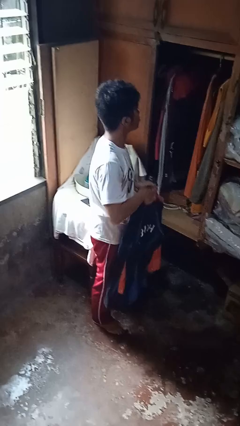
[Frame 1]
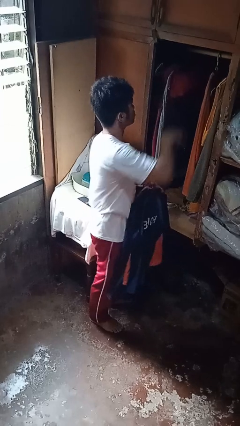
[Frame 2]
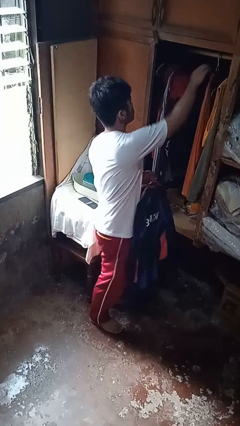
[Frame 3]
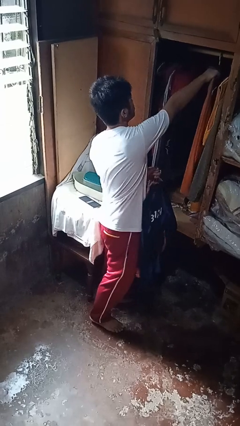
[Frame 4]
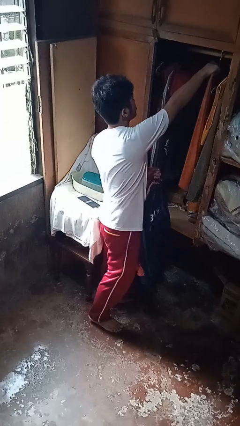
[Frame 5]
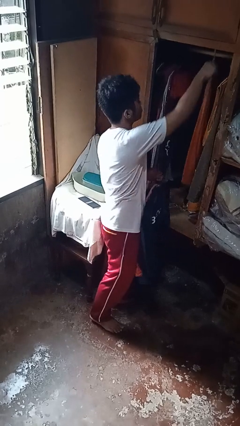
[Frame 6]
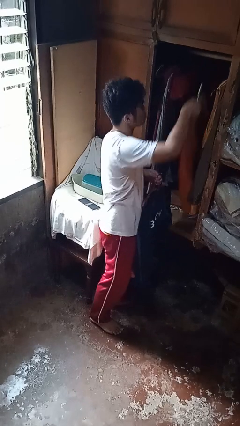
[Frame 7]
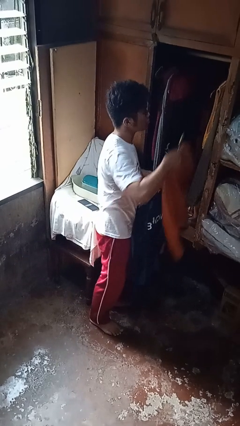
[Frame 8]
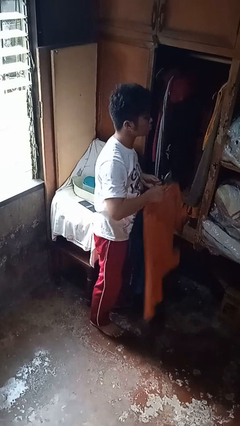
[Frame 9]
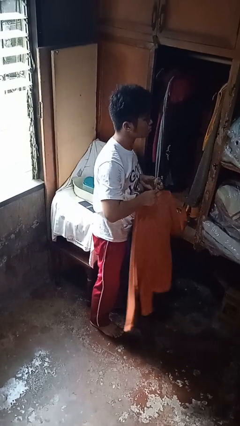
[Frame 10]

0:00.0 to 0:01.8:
person takes clothes from closet

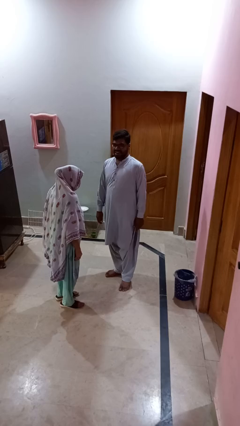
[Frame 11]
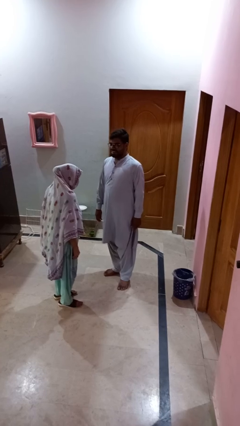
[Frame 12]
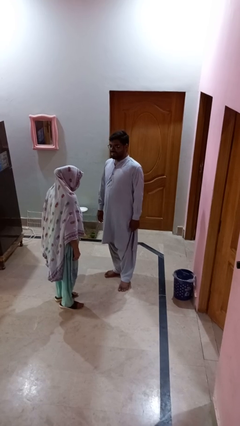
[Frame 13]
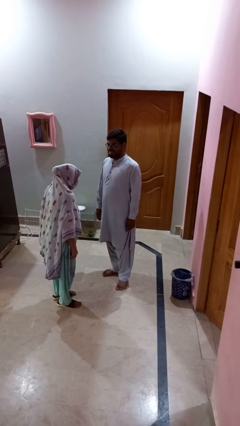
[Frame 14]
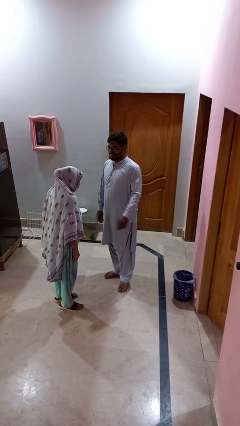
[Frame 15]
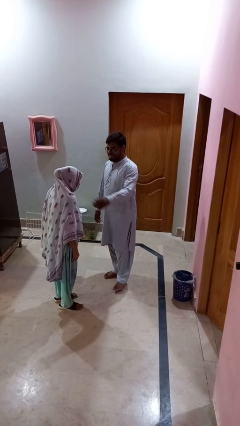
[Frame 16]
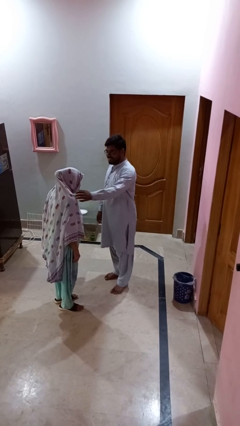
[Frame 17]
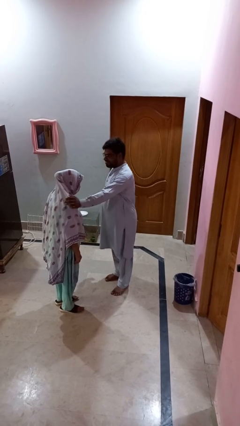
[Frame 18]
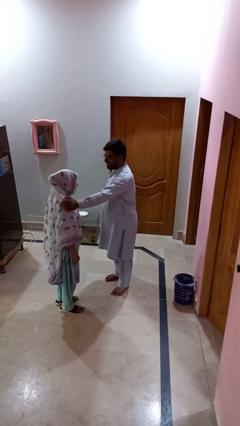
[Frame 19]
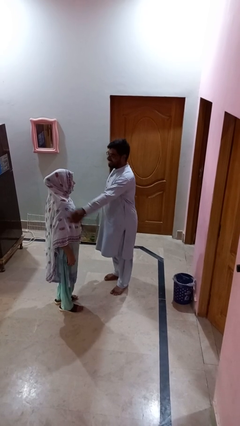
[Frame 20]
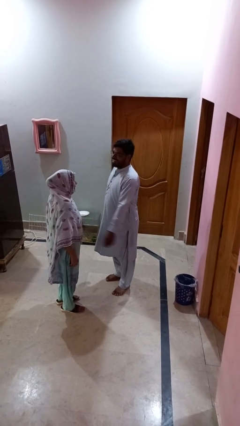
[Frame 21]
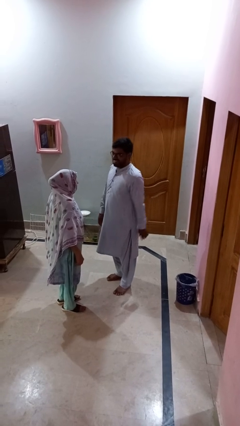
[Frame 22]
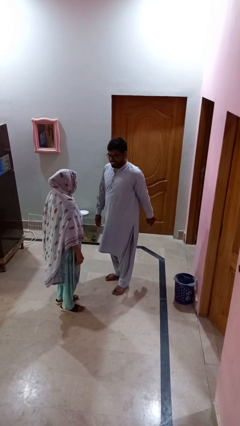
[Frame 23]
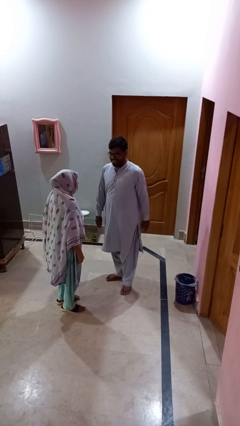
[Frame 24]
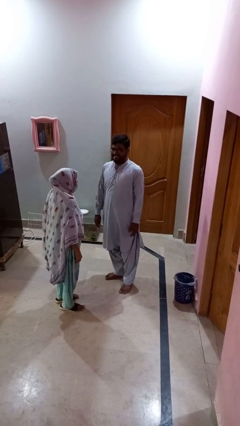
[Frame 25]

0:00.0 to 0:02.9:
person shoves person

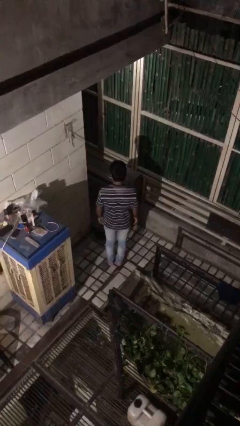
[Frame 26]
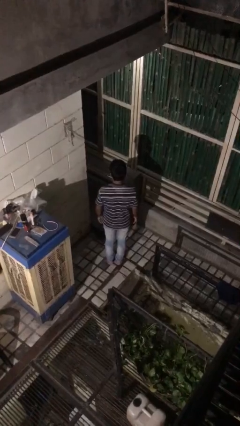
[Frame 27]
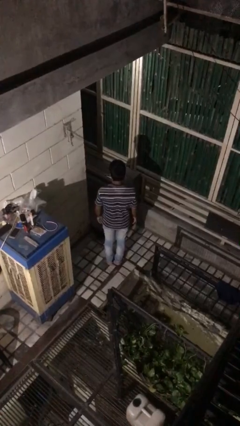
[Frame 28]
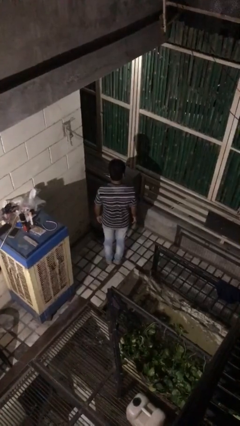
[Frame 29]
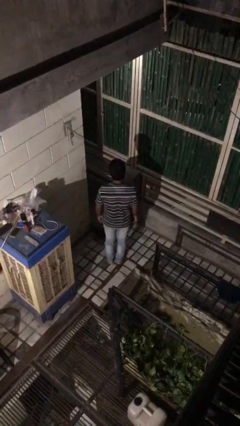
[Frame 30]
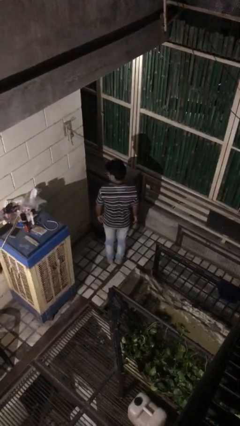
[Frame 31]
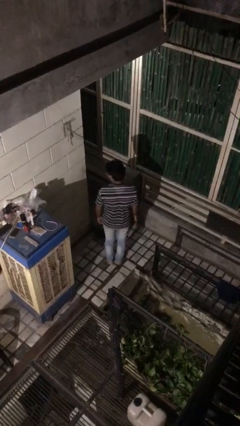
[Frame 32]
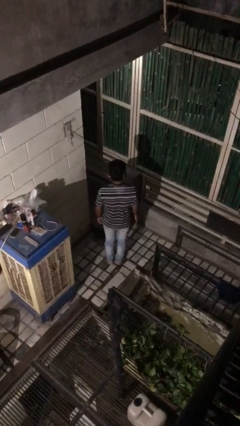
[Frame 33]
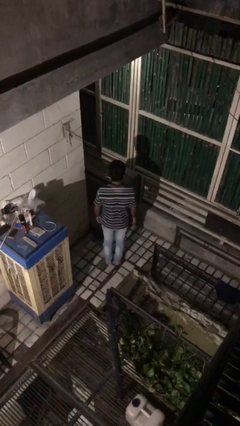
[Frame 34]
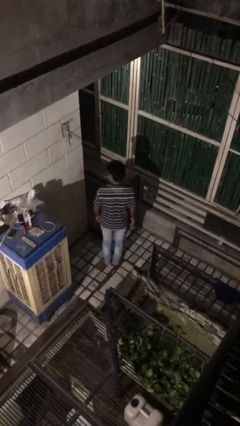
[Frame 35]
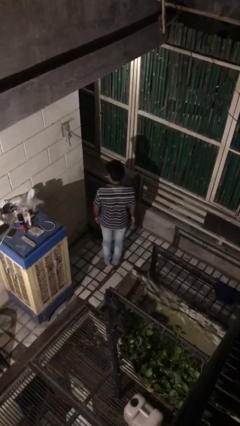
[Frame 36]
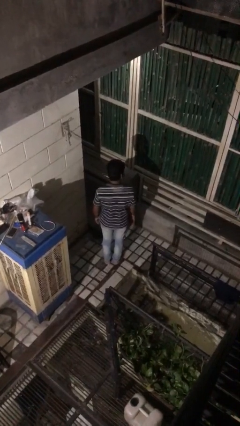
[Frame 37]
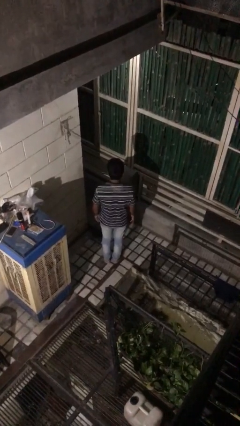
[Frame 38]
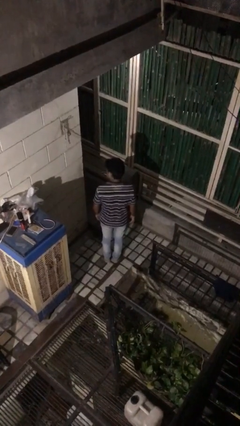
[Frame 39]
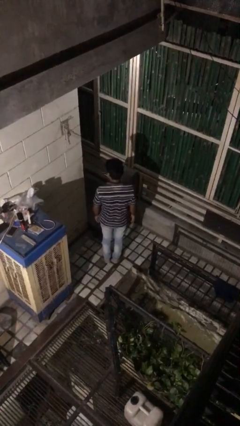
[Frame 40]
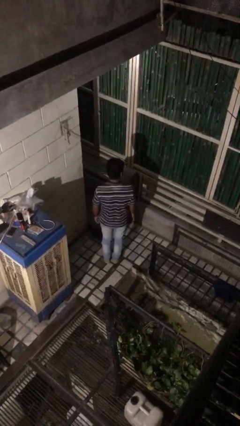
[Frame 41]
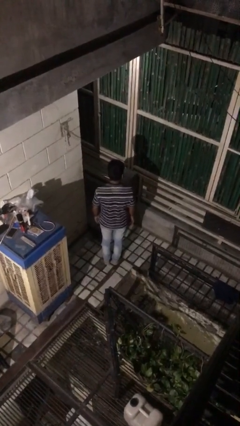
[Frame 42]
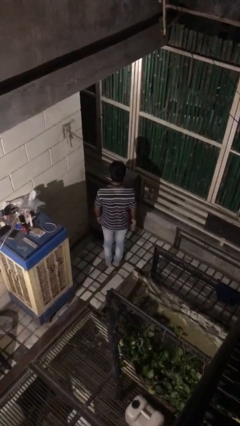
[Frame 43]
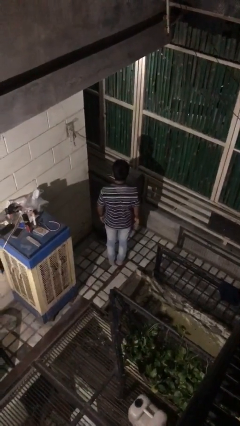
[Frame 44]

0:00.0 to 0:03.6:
person shakes head

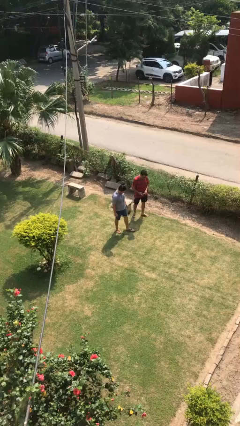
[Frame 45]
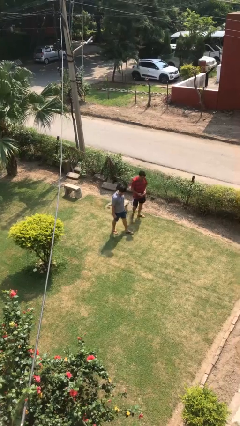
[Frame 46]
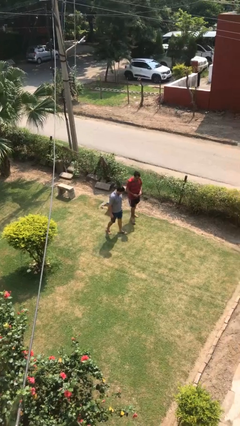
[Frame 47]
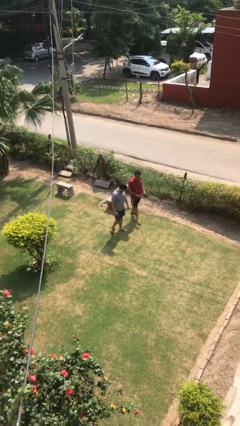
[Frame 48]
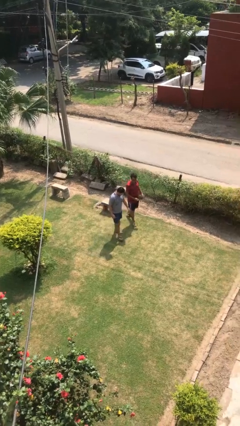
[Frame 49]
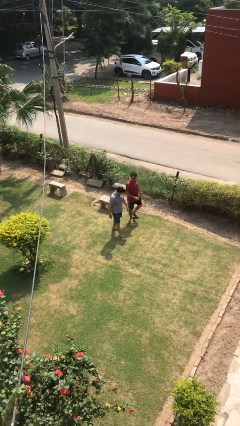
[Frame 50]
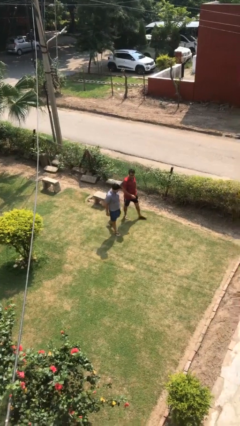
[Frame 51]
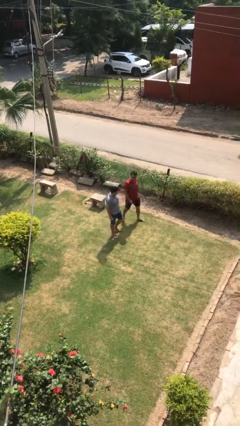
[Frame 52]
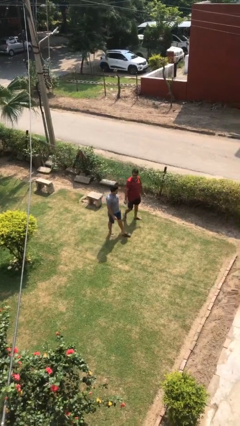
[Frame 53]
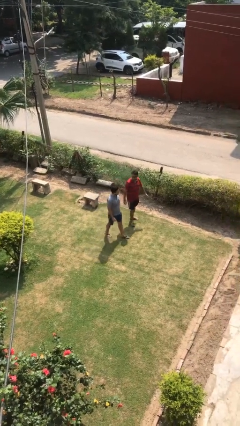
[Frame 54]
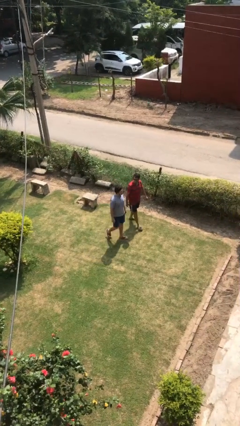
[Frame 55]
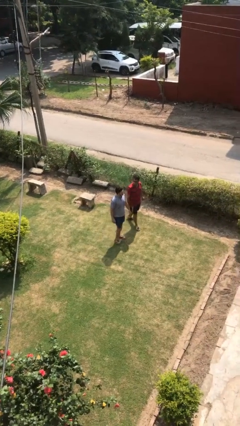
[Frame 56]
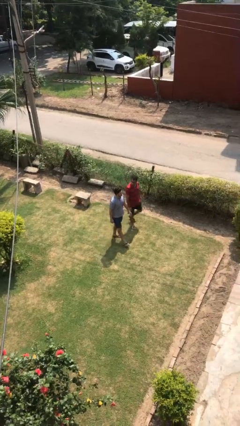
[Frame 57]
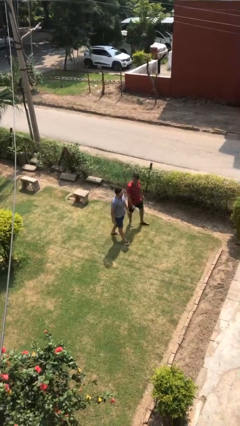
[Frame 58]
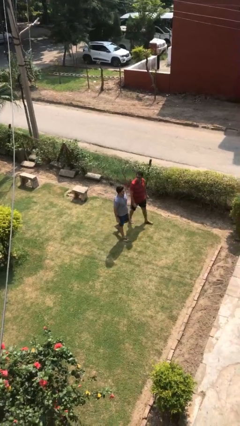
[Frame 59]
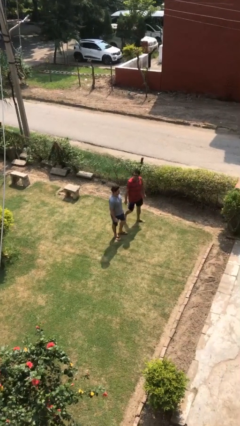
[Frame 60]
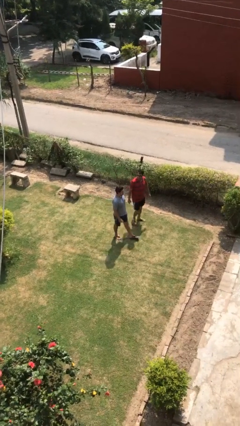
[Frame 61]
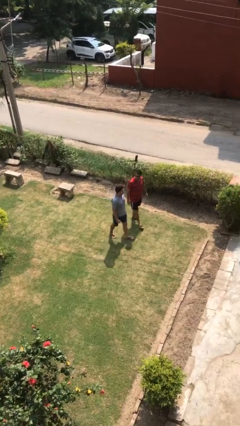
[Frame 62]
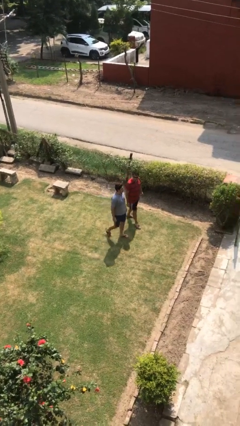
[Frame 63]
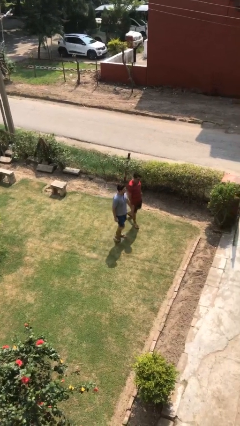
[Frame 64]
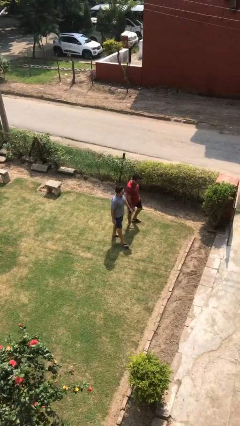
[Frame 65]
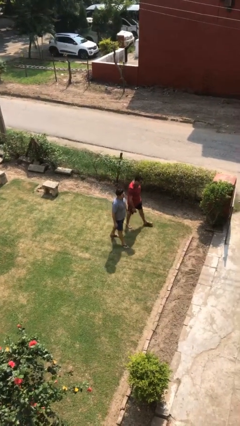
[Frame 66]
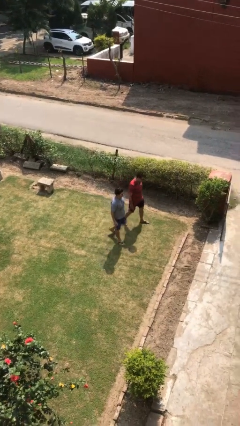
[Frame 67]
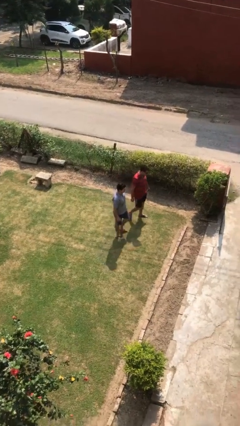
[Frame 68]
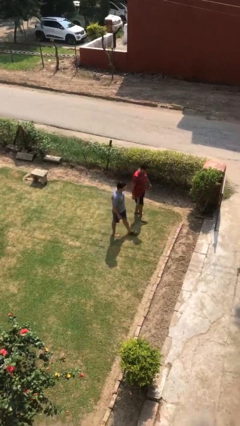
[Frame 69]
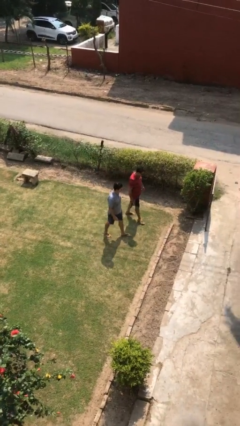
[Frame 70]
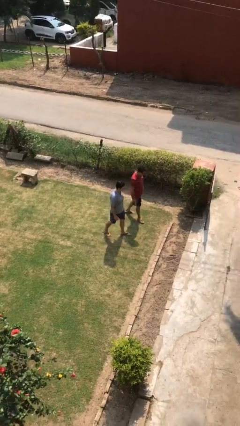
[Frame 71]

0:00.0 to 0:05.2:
person talks to person

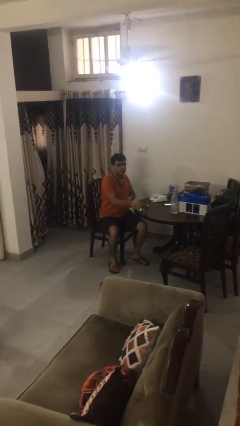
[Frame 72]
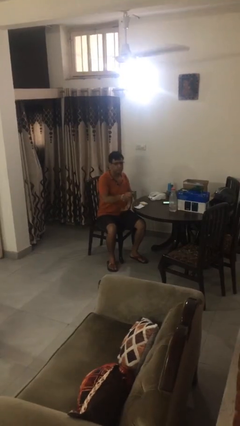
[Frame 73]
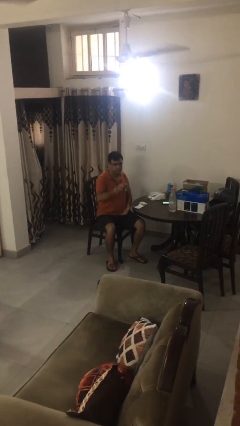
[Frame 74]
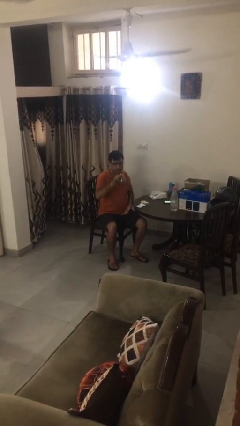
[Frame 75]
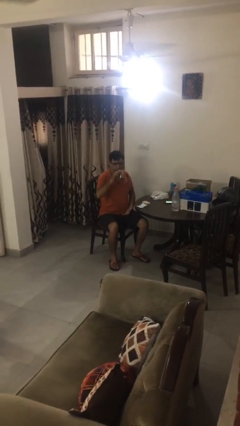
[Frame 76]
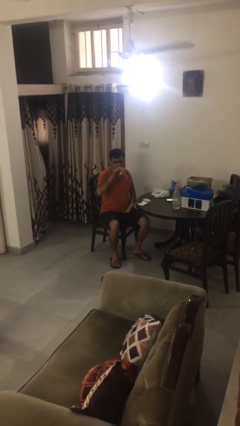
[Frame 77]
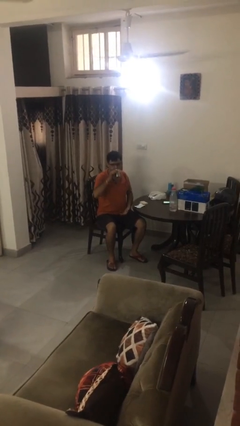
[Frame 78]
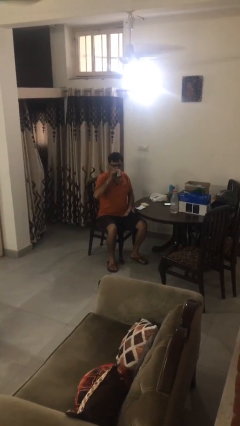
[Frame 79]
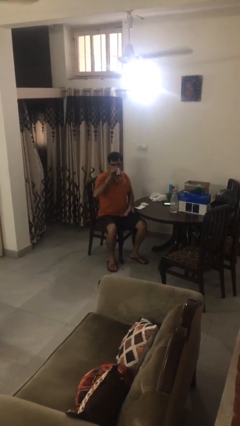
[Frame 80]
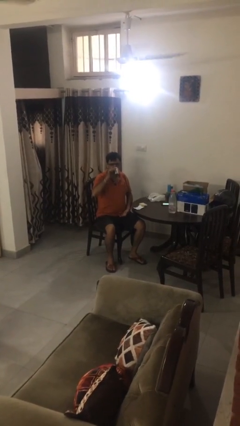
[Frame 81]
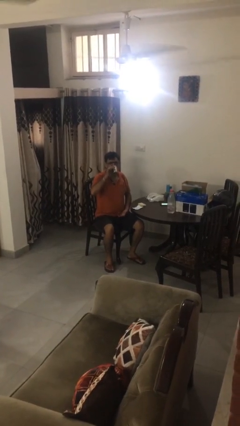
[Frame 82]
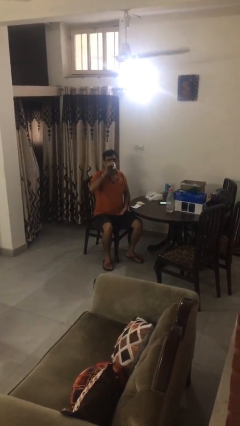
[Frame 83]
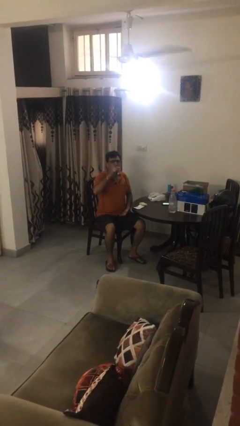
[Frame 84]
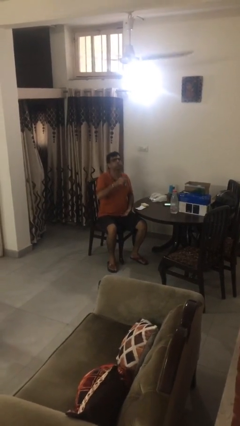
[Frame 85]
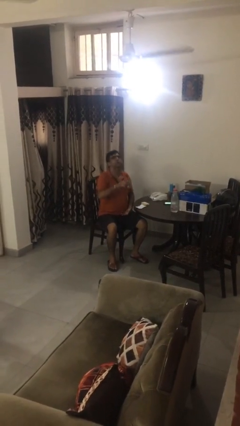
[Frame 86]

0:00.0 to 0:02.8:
person drinks from cup

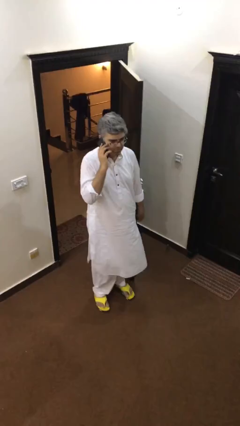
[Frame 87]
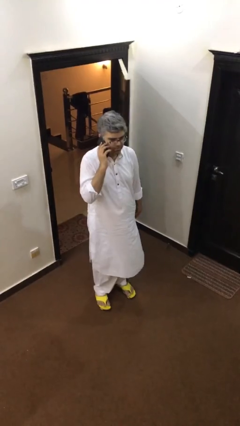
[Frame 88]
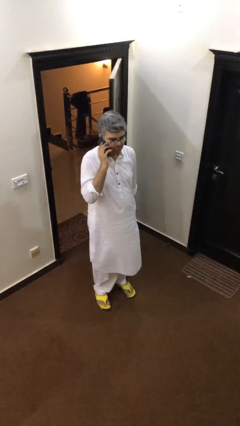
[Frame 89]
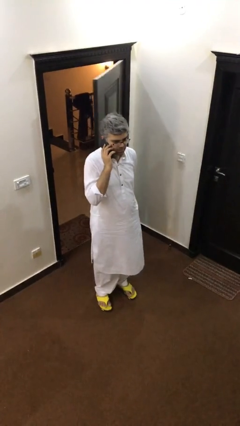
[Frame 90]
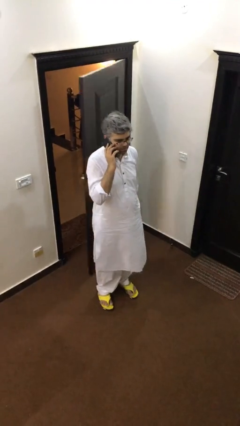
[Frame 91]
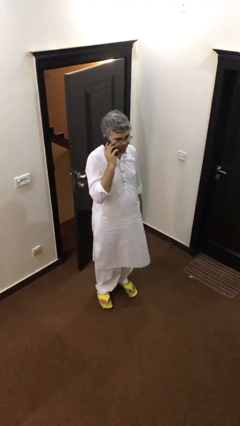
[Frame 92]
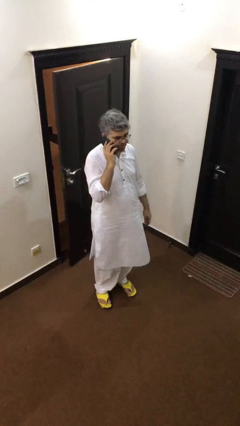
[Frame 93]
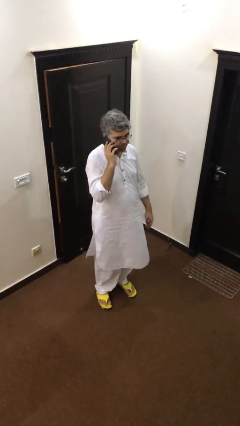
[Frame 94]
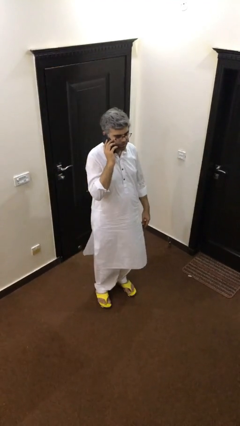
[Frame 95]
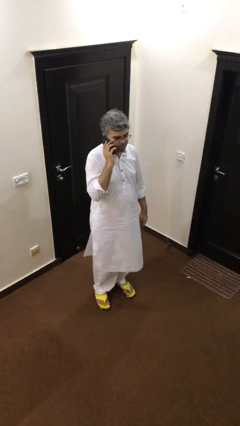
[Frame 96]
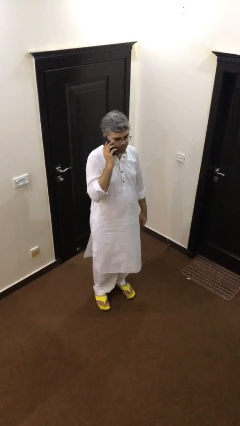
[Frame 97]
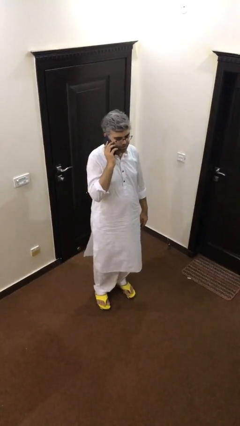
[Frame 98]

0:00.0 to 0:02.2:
person closes facility door
